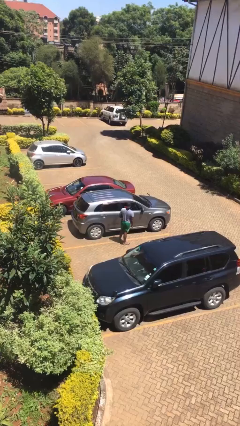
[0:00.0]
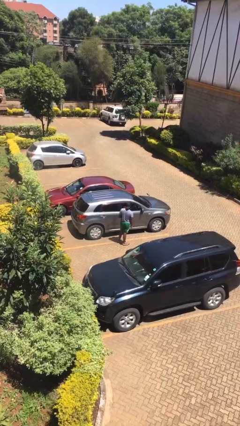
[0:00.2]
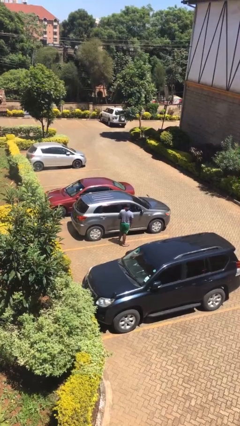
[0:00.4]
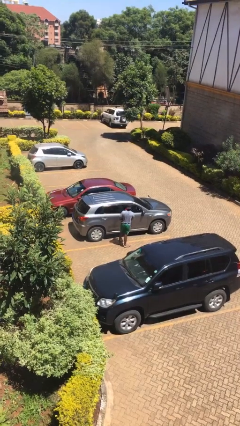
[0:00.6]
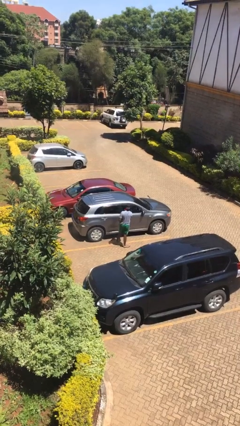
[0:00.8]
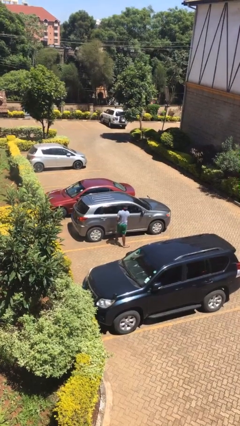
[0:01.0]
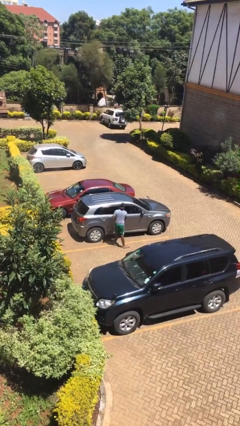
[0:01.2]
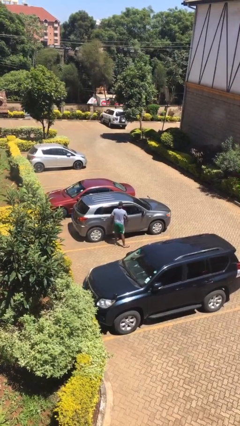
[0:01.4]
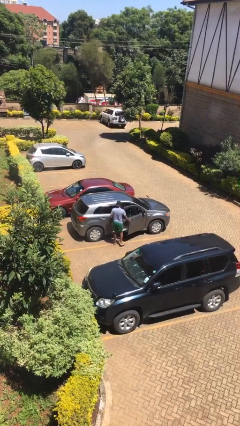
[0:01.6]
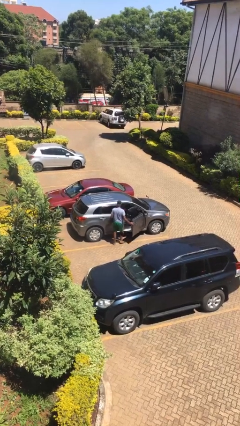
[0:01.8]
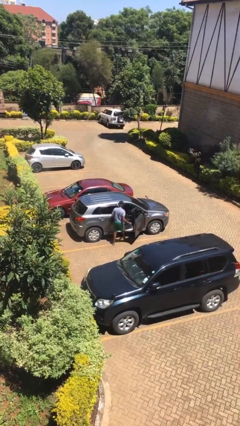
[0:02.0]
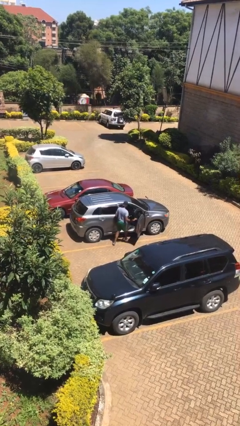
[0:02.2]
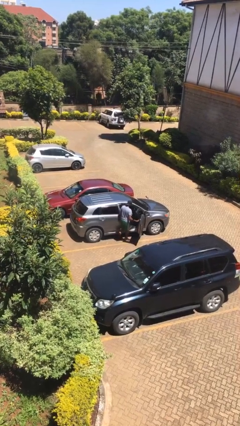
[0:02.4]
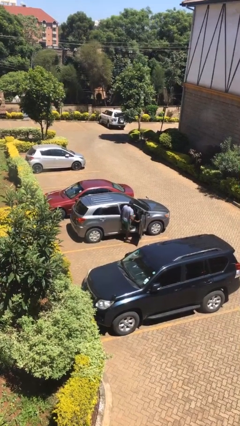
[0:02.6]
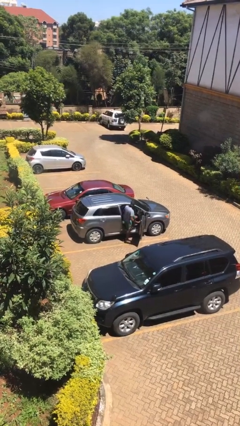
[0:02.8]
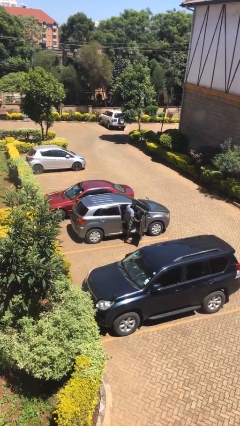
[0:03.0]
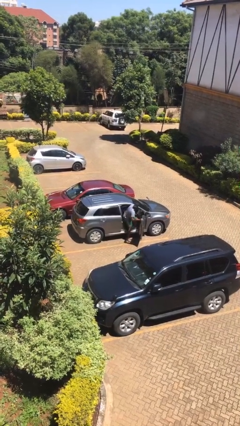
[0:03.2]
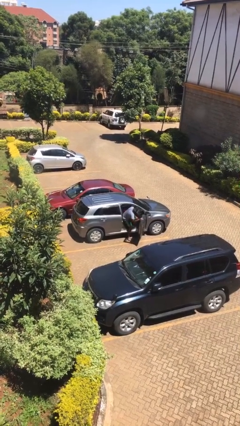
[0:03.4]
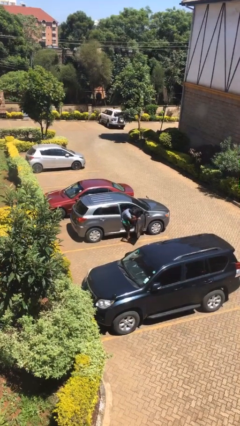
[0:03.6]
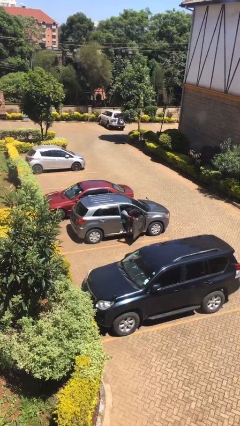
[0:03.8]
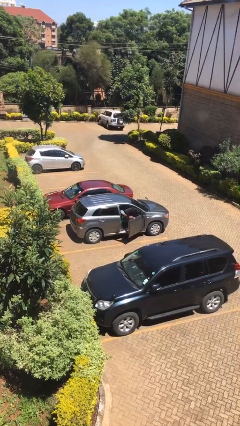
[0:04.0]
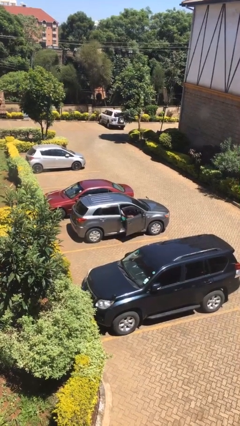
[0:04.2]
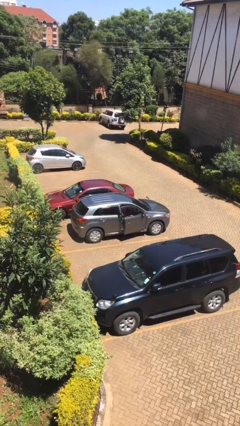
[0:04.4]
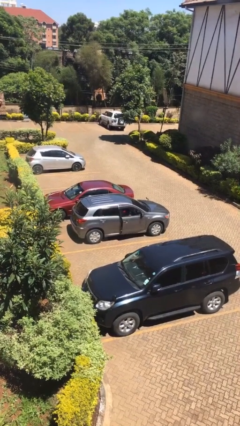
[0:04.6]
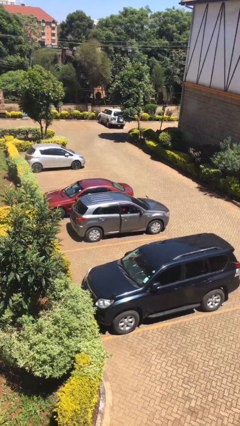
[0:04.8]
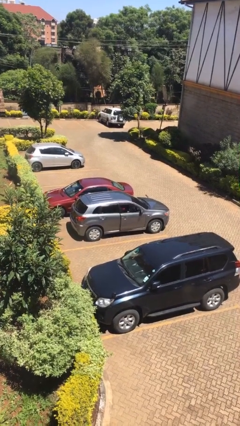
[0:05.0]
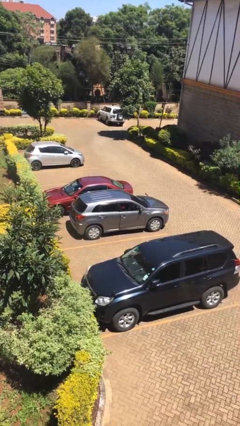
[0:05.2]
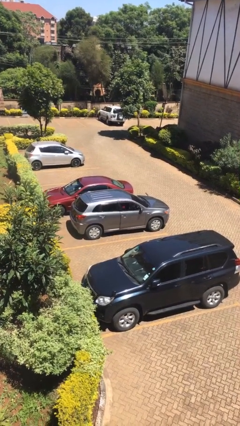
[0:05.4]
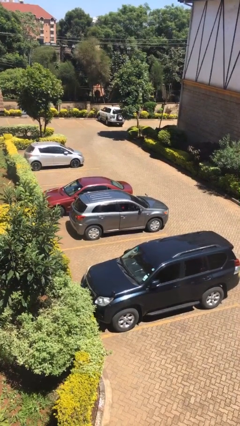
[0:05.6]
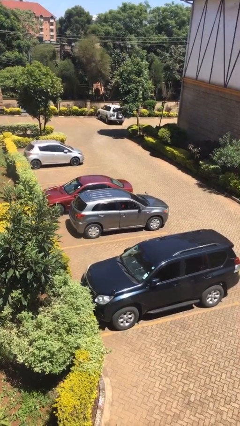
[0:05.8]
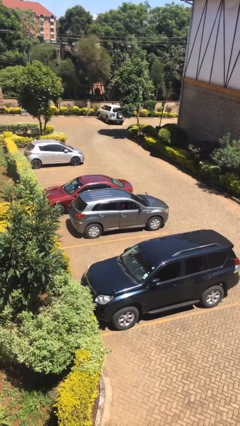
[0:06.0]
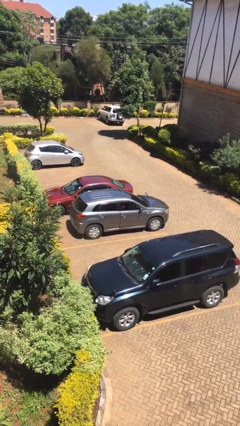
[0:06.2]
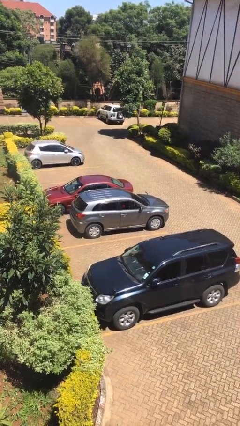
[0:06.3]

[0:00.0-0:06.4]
car picks up person

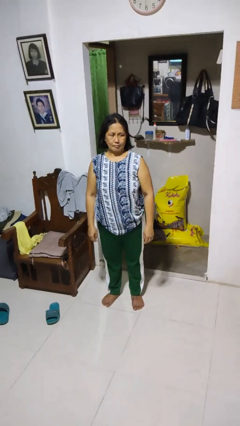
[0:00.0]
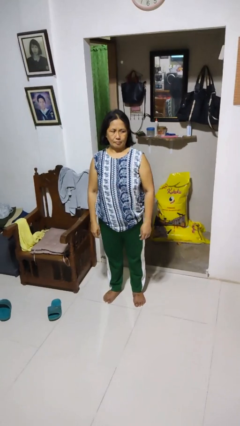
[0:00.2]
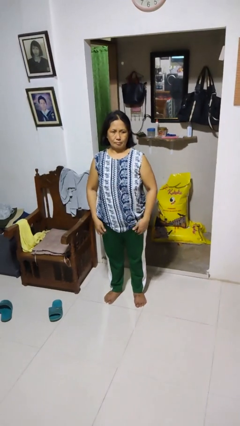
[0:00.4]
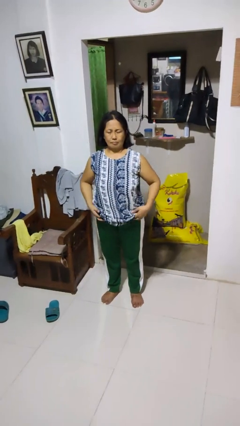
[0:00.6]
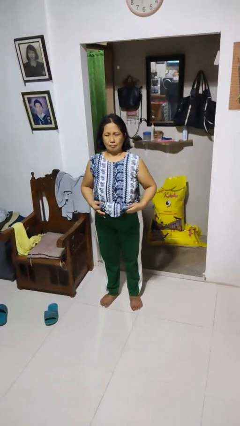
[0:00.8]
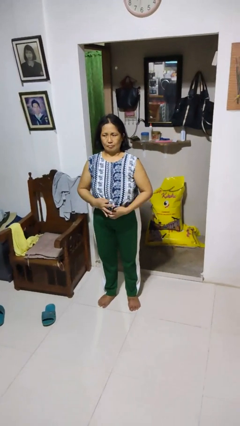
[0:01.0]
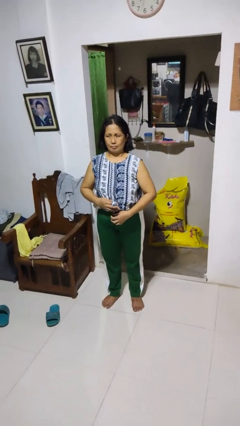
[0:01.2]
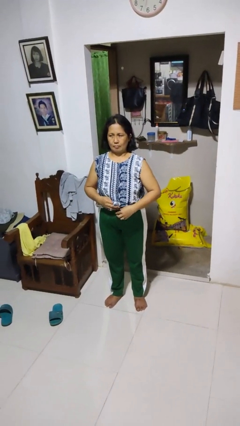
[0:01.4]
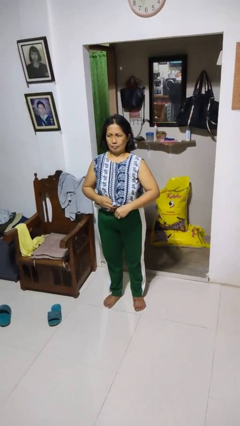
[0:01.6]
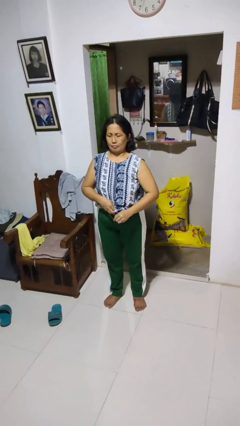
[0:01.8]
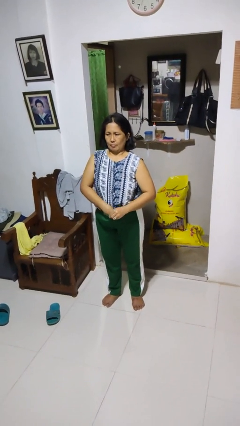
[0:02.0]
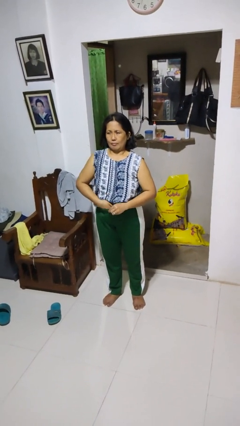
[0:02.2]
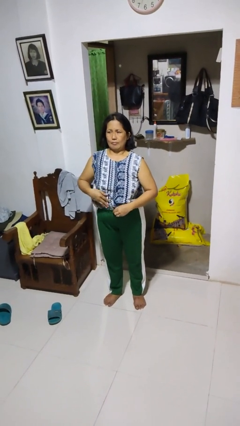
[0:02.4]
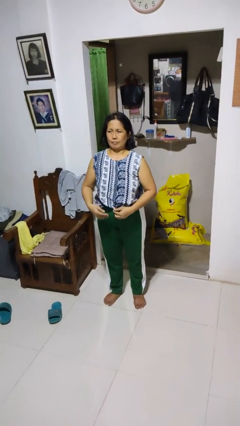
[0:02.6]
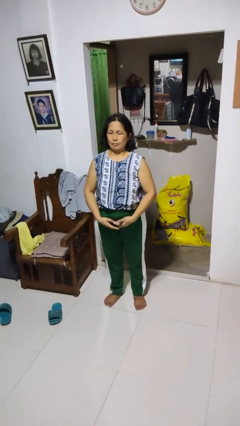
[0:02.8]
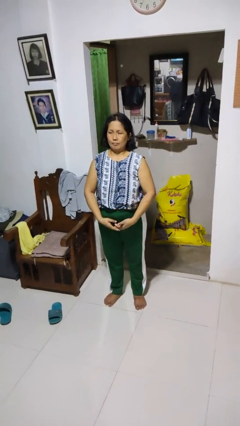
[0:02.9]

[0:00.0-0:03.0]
person tucks in shirt

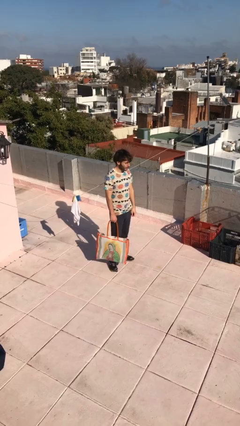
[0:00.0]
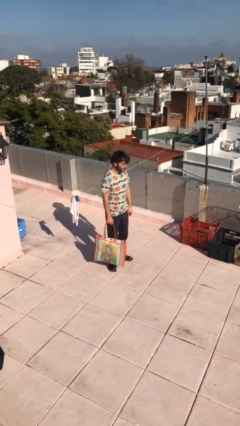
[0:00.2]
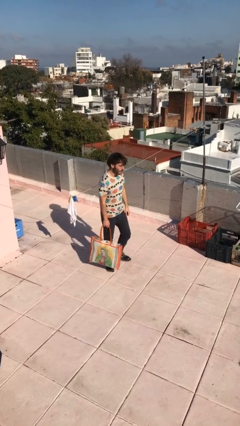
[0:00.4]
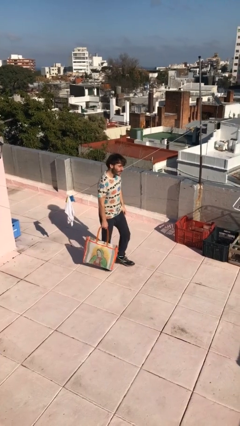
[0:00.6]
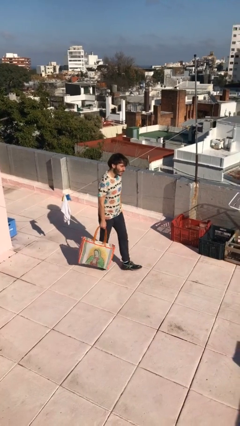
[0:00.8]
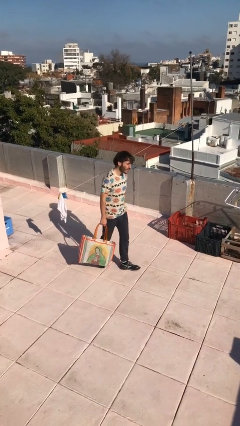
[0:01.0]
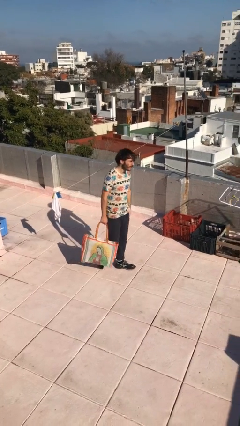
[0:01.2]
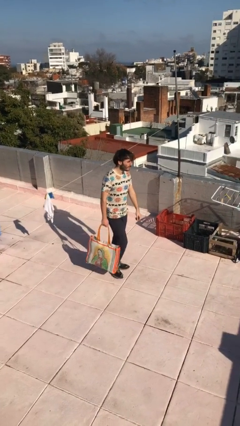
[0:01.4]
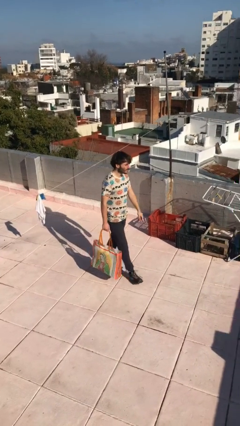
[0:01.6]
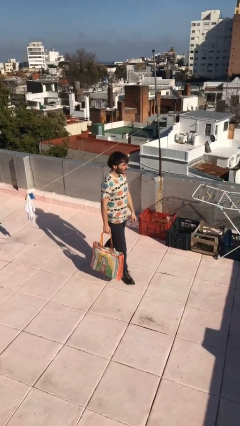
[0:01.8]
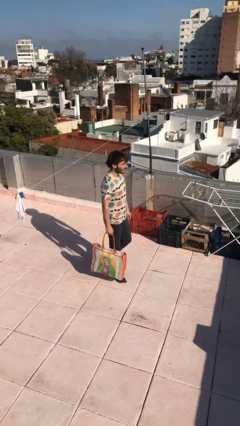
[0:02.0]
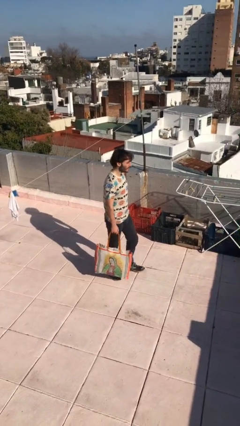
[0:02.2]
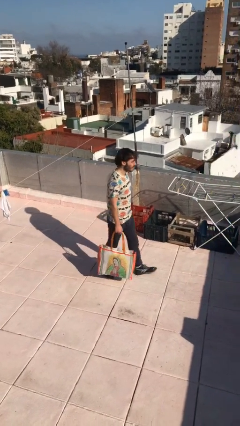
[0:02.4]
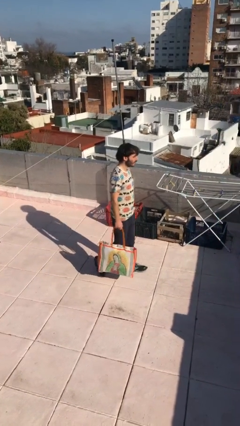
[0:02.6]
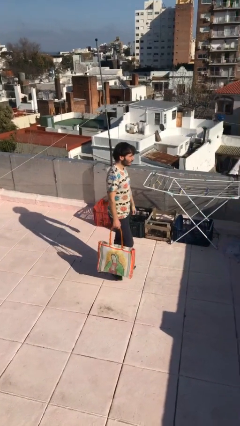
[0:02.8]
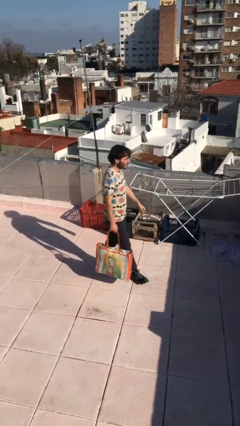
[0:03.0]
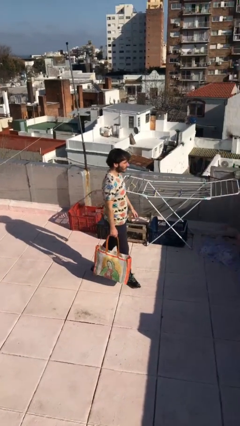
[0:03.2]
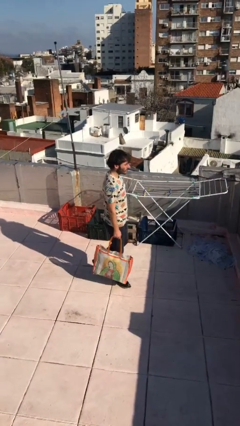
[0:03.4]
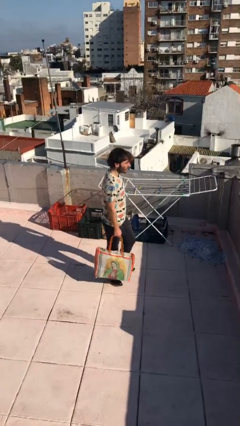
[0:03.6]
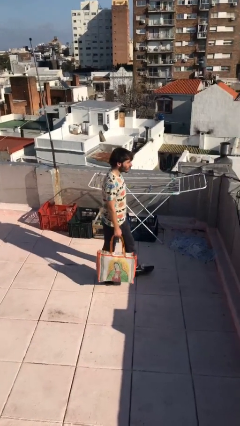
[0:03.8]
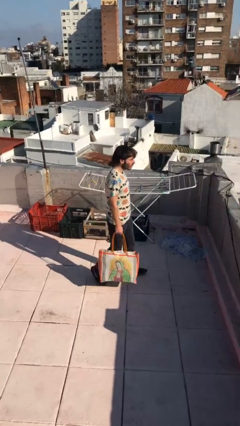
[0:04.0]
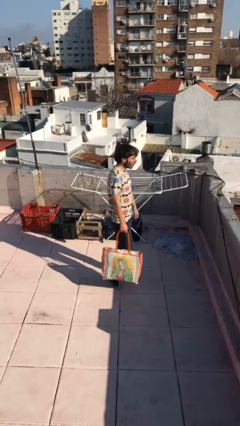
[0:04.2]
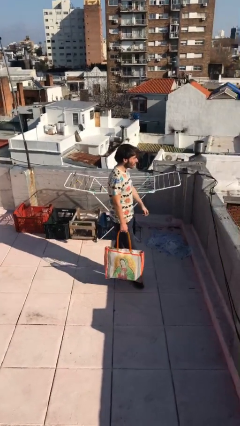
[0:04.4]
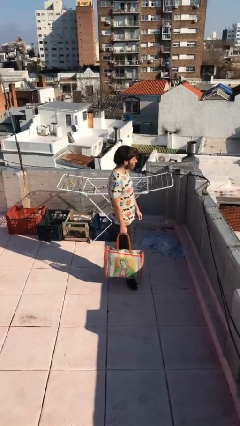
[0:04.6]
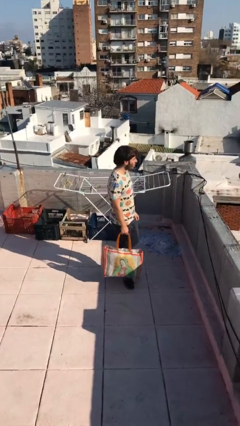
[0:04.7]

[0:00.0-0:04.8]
person carries groceries

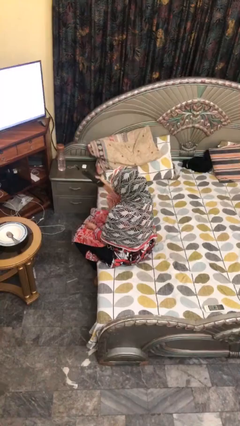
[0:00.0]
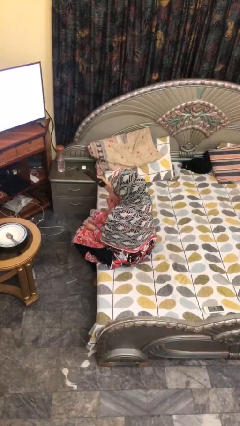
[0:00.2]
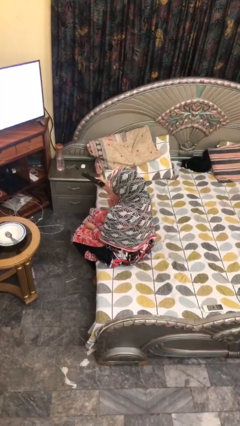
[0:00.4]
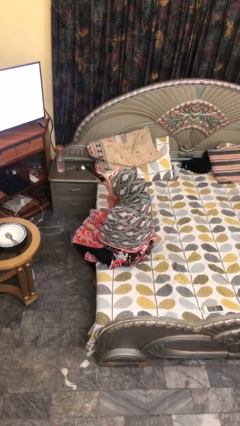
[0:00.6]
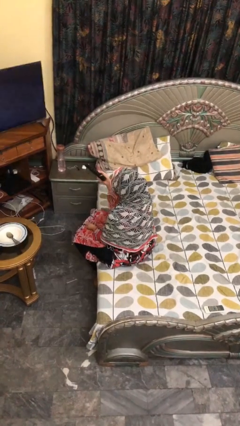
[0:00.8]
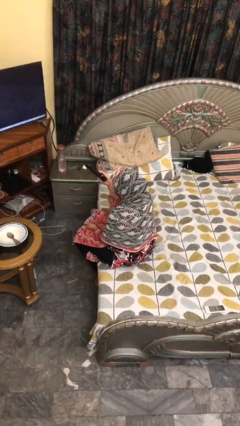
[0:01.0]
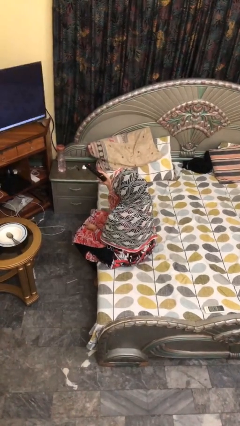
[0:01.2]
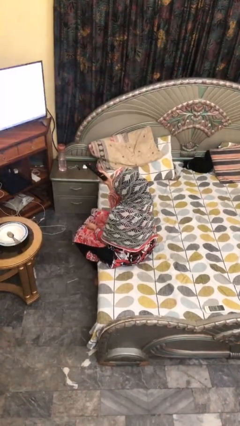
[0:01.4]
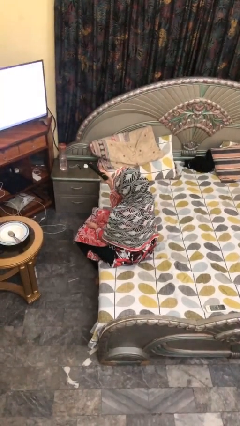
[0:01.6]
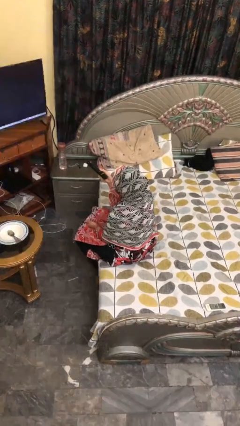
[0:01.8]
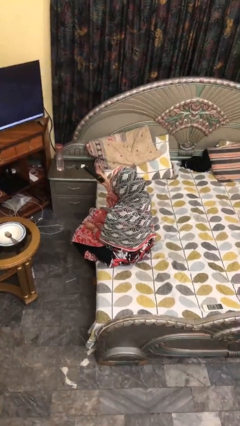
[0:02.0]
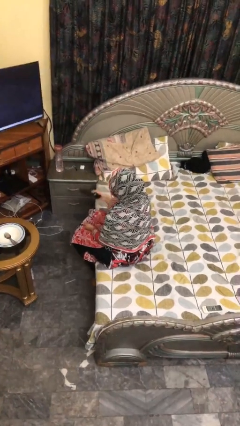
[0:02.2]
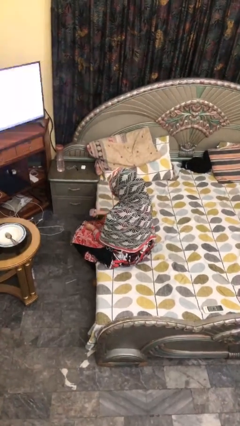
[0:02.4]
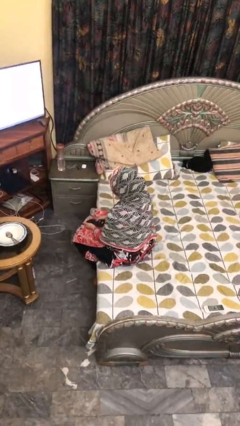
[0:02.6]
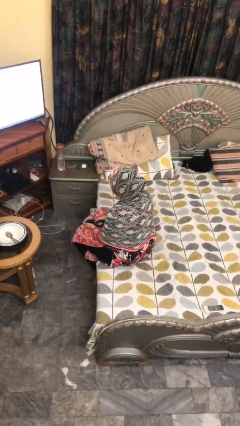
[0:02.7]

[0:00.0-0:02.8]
person uses television remote

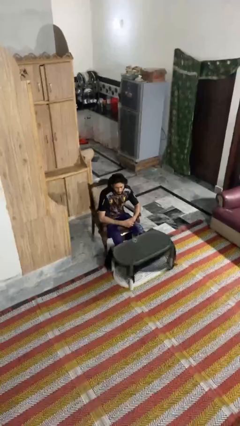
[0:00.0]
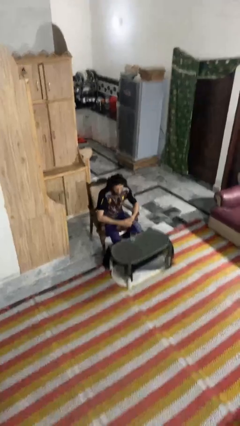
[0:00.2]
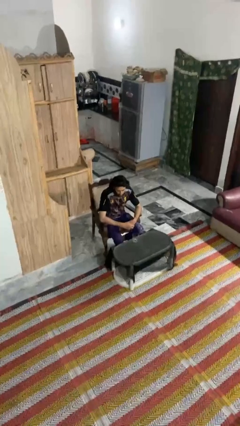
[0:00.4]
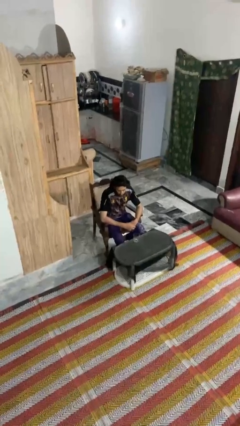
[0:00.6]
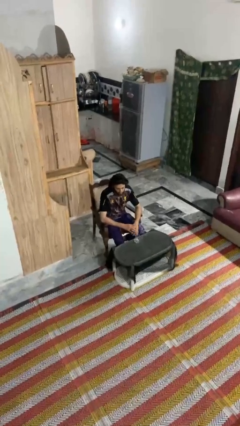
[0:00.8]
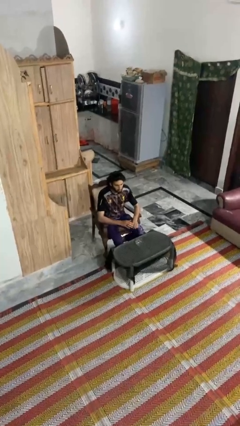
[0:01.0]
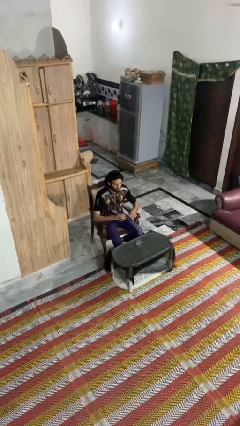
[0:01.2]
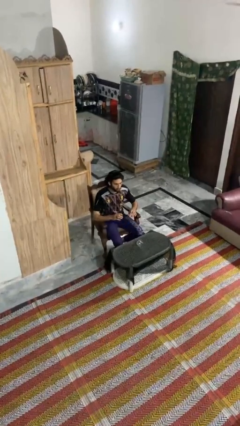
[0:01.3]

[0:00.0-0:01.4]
person knocks over glass
